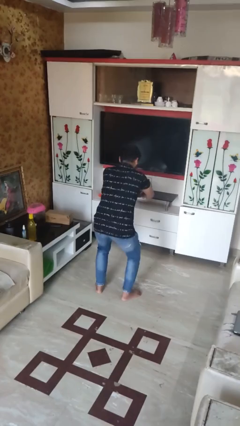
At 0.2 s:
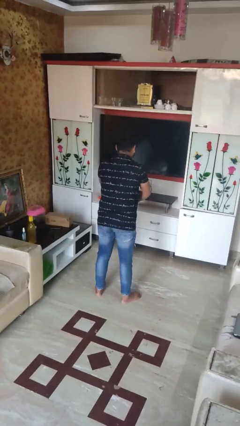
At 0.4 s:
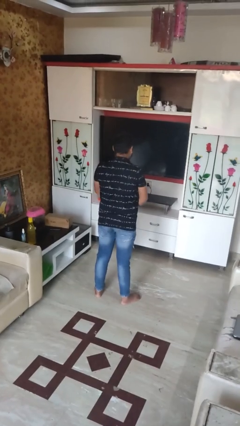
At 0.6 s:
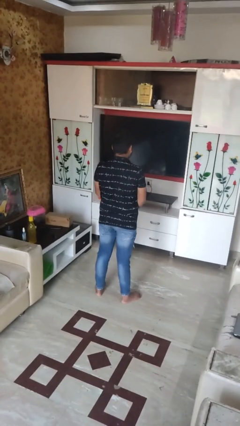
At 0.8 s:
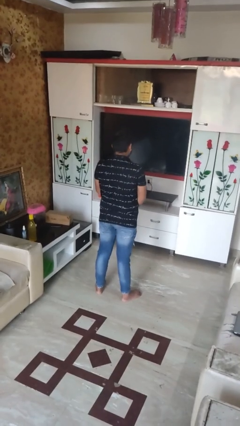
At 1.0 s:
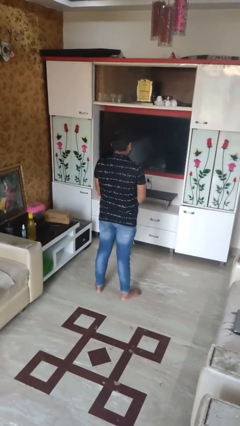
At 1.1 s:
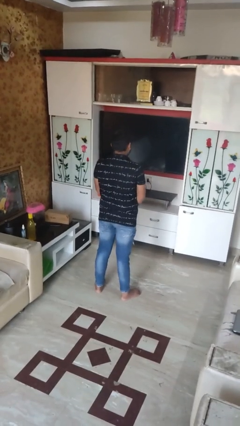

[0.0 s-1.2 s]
person stands up

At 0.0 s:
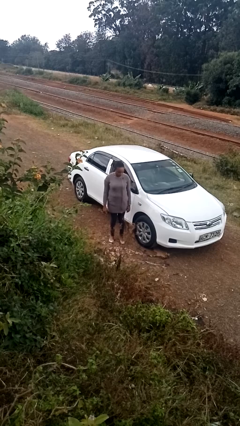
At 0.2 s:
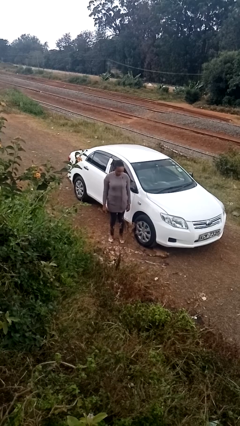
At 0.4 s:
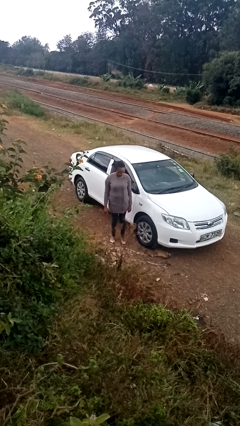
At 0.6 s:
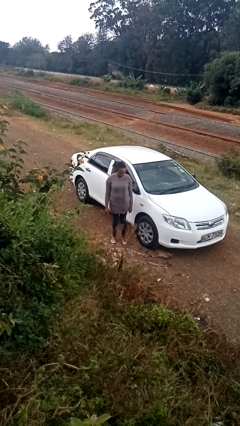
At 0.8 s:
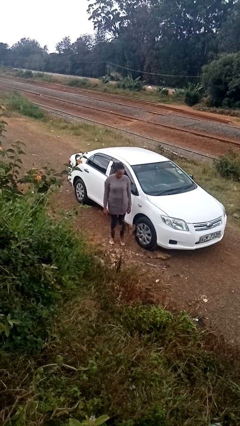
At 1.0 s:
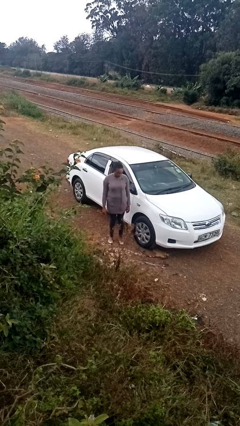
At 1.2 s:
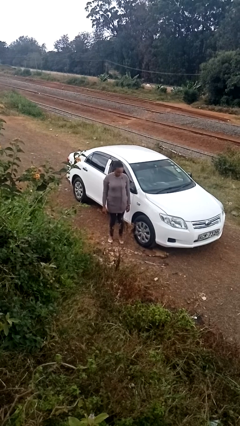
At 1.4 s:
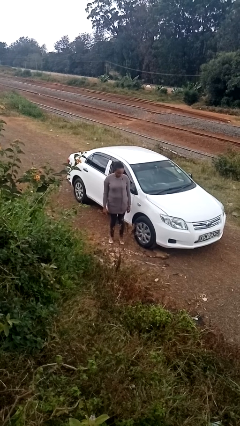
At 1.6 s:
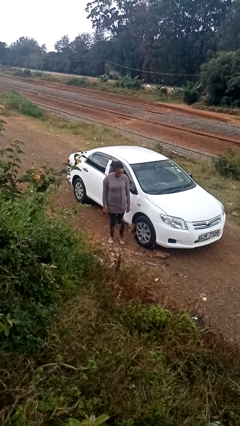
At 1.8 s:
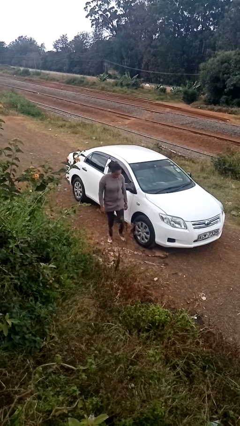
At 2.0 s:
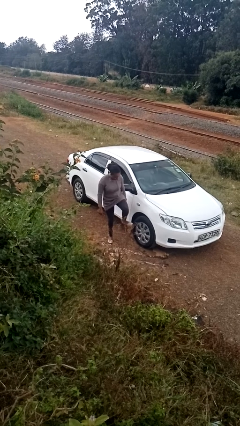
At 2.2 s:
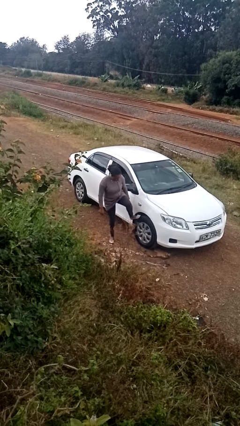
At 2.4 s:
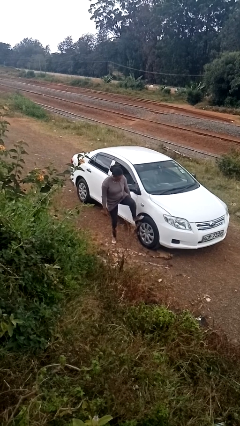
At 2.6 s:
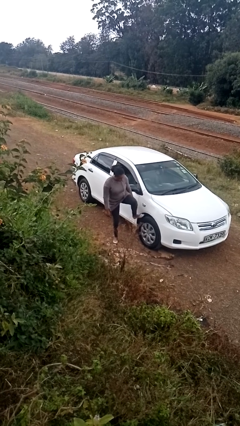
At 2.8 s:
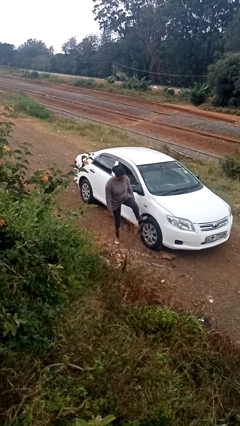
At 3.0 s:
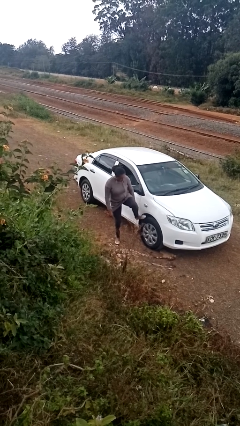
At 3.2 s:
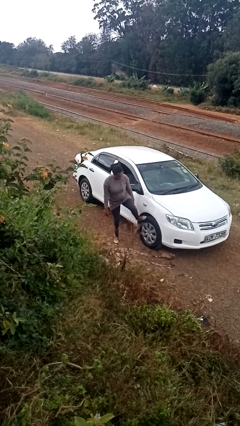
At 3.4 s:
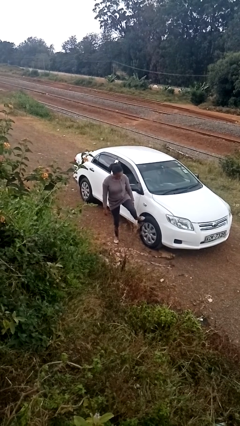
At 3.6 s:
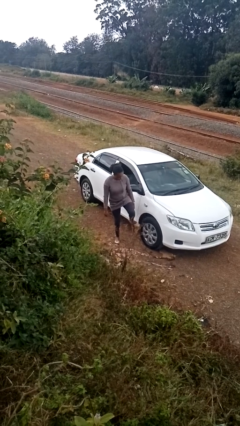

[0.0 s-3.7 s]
person kicks car tires

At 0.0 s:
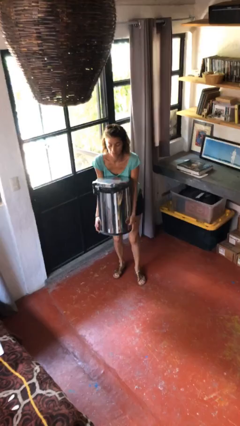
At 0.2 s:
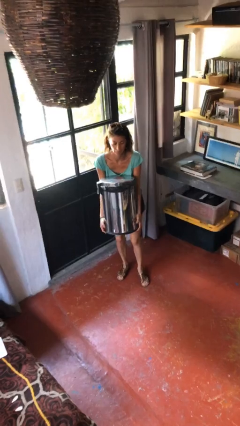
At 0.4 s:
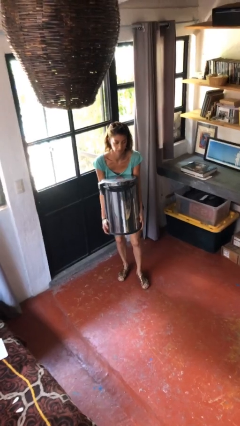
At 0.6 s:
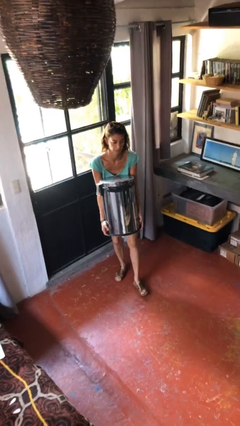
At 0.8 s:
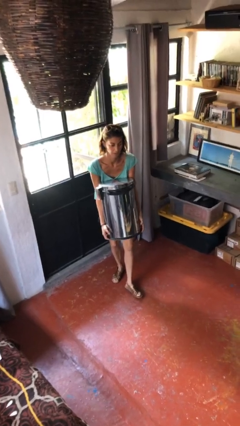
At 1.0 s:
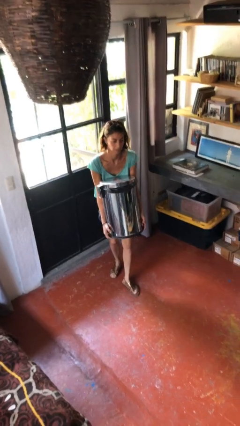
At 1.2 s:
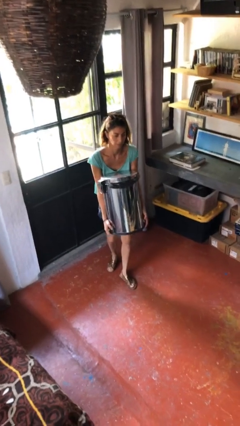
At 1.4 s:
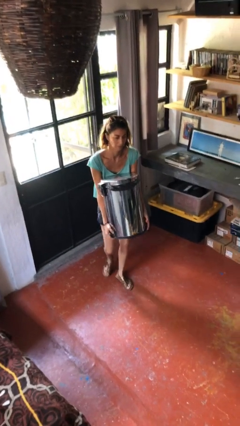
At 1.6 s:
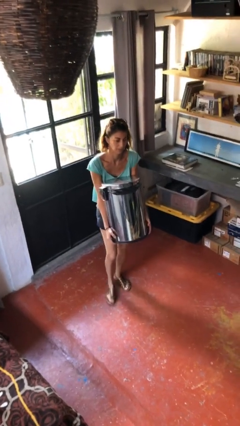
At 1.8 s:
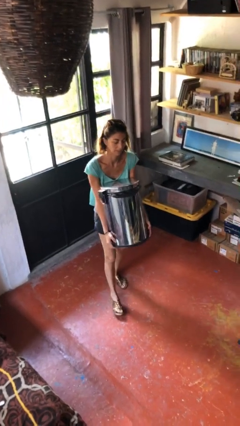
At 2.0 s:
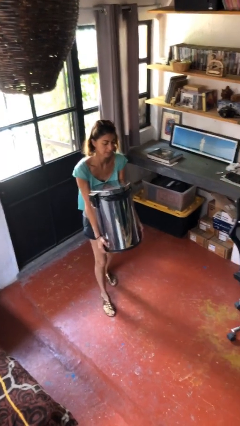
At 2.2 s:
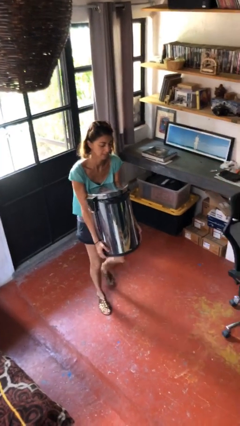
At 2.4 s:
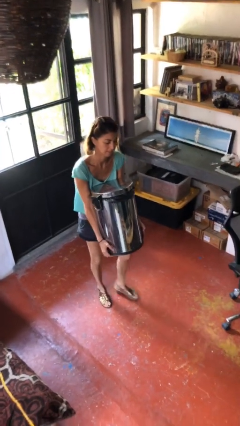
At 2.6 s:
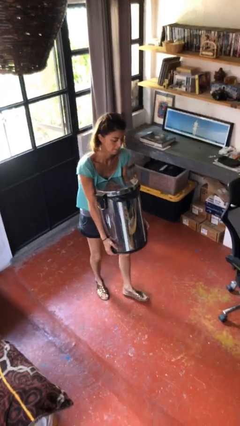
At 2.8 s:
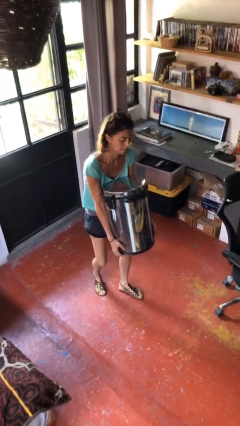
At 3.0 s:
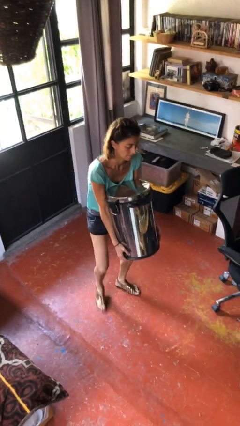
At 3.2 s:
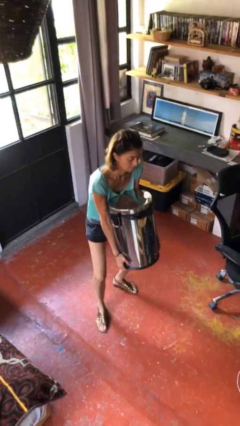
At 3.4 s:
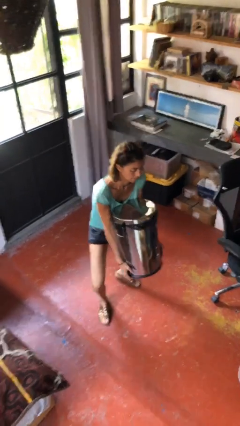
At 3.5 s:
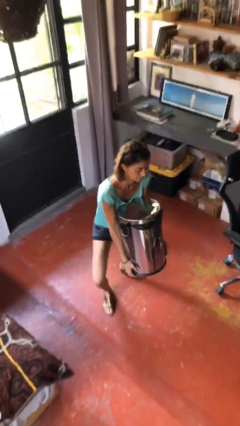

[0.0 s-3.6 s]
person carries heavy object

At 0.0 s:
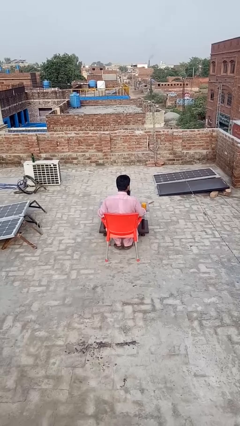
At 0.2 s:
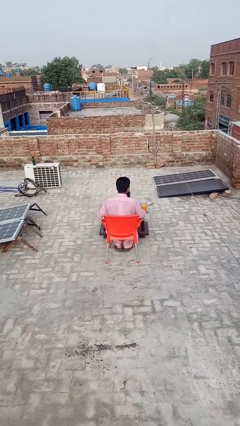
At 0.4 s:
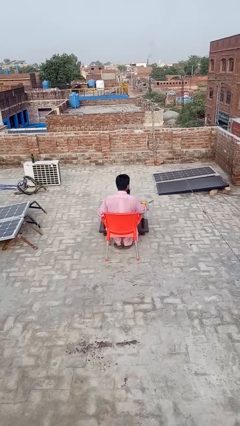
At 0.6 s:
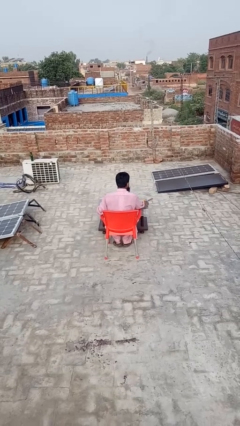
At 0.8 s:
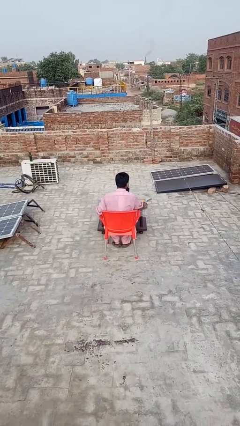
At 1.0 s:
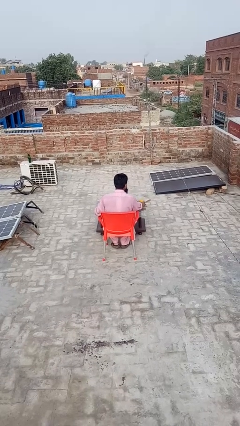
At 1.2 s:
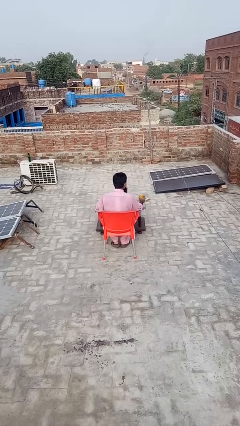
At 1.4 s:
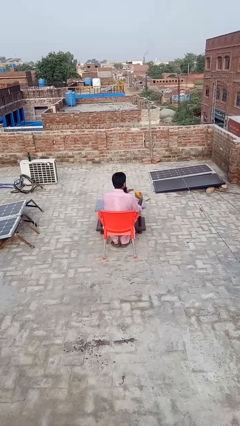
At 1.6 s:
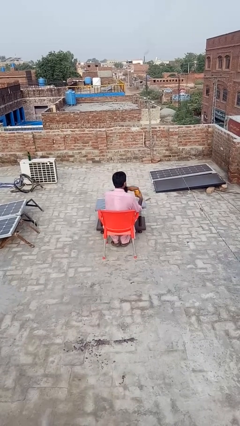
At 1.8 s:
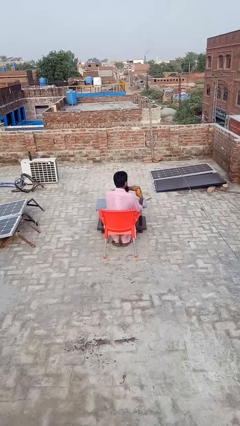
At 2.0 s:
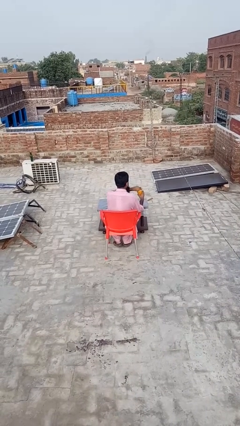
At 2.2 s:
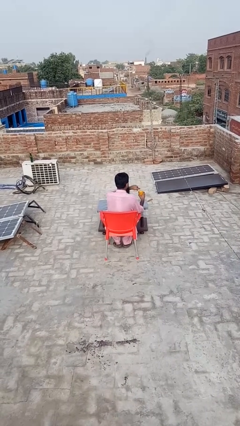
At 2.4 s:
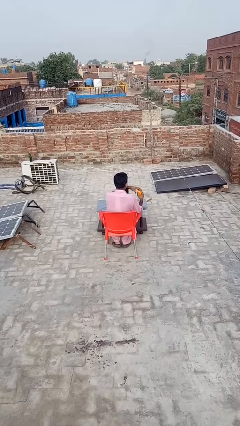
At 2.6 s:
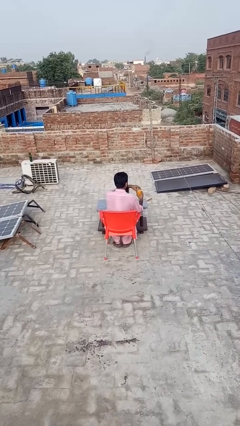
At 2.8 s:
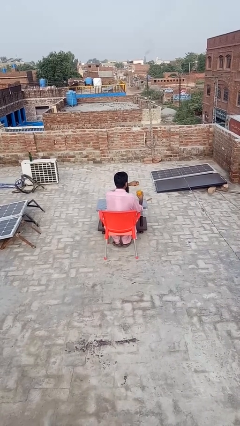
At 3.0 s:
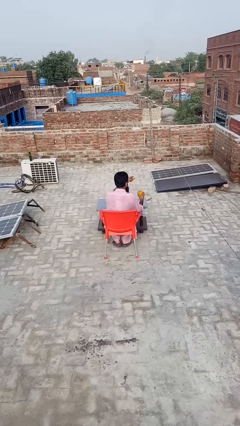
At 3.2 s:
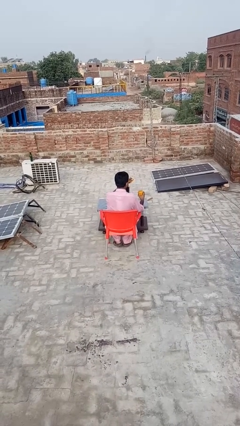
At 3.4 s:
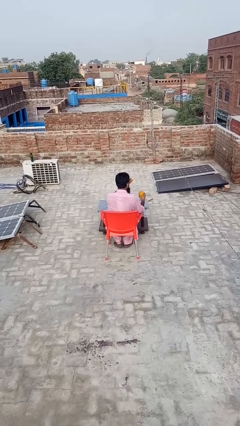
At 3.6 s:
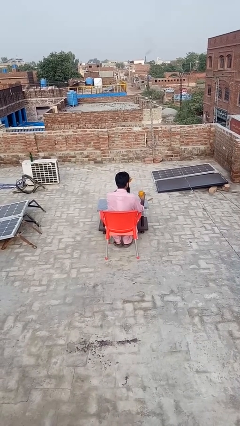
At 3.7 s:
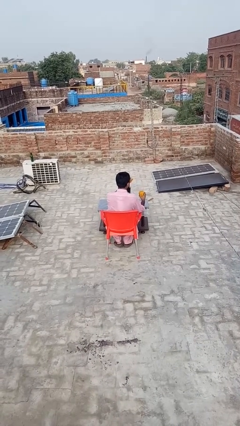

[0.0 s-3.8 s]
person opens jar

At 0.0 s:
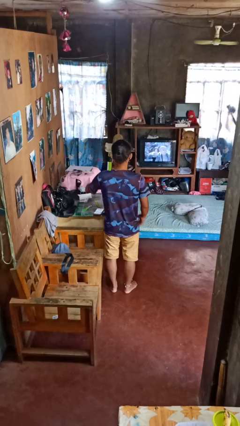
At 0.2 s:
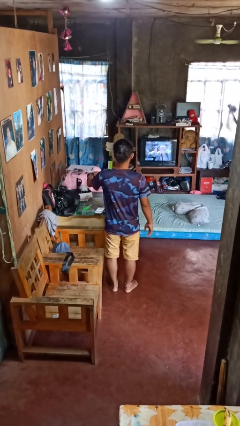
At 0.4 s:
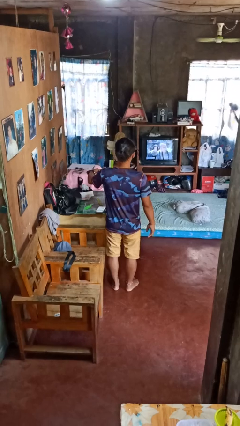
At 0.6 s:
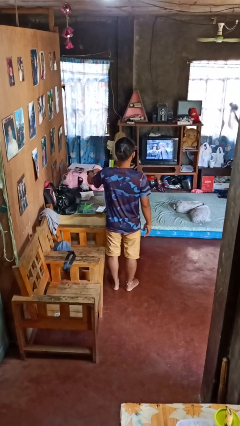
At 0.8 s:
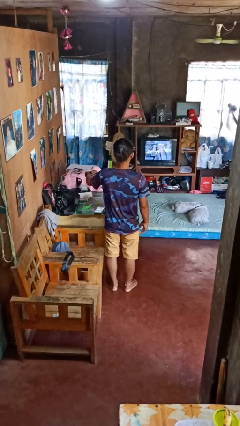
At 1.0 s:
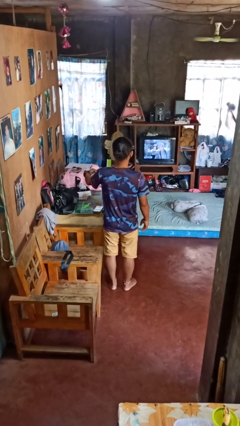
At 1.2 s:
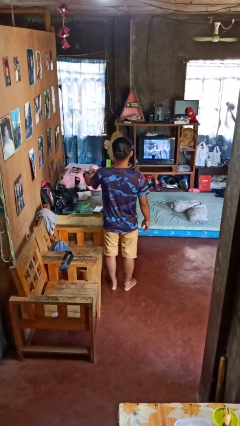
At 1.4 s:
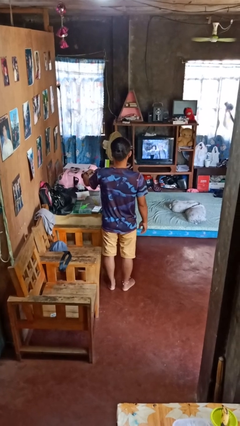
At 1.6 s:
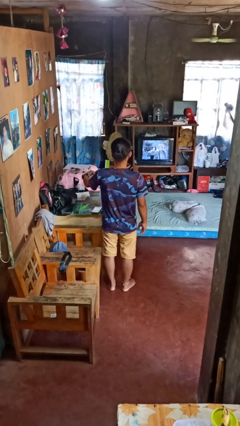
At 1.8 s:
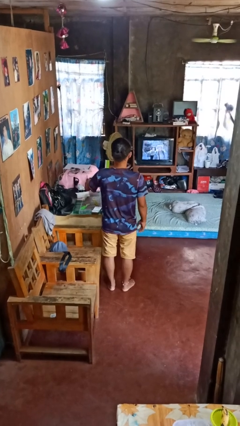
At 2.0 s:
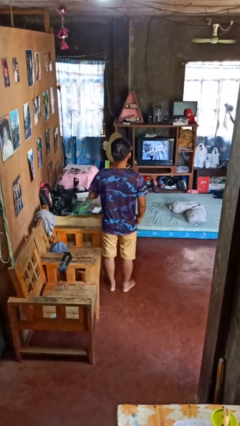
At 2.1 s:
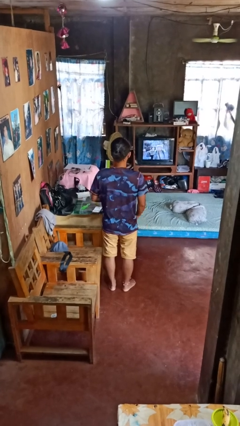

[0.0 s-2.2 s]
person uses television remote

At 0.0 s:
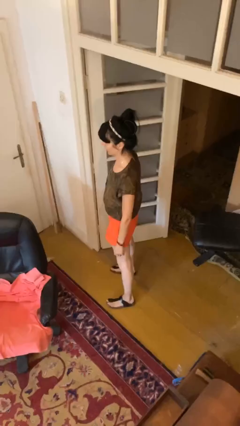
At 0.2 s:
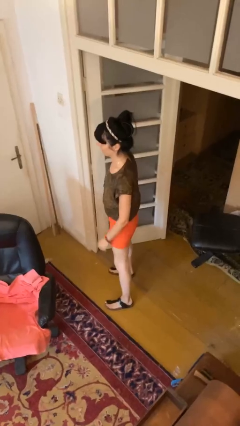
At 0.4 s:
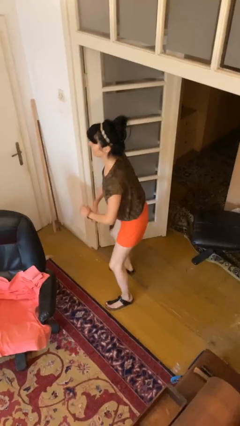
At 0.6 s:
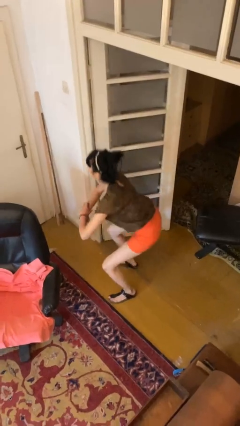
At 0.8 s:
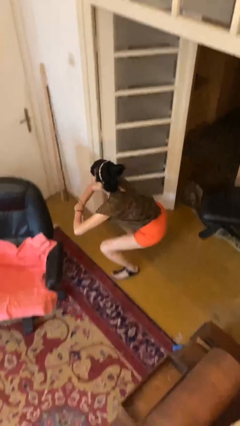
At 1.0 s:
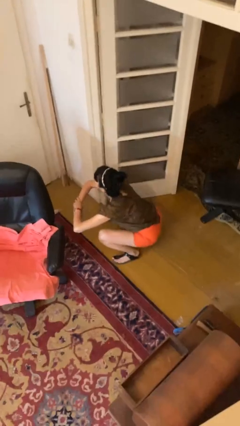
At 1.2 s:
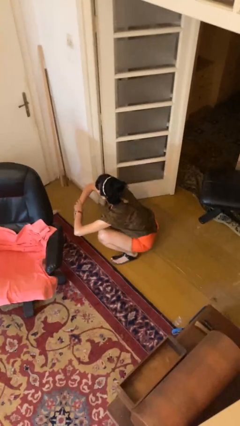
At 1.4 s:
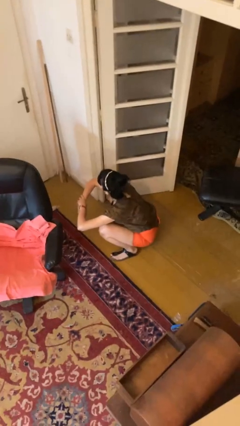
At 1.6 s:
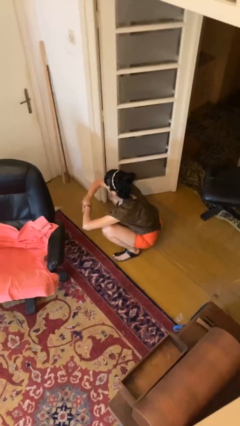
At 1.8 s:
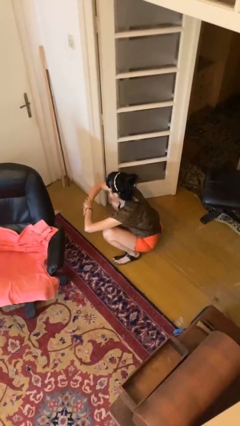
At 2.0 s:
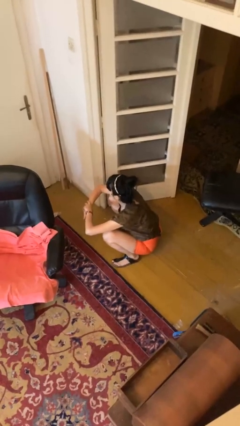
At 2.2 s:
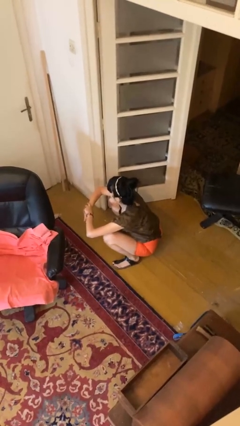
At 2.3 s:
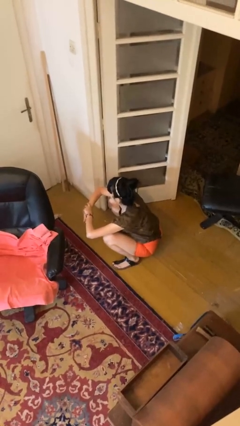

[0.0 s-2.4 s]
person squats

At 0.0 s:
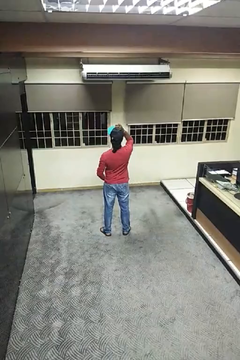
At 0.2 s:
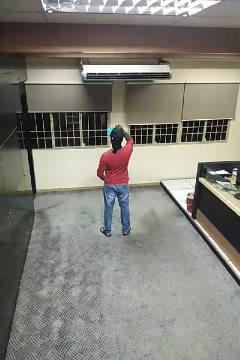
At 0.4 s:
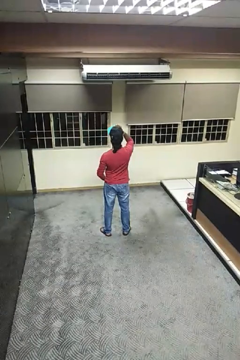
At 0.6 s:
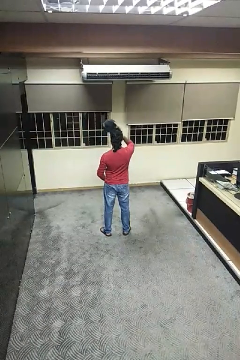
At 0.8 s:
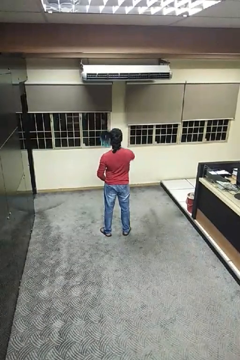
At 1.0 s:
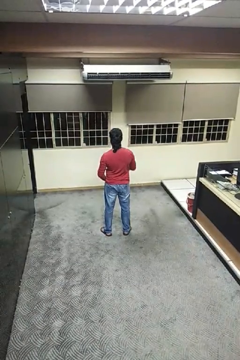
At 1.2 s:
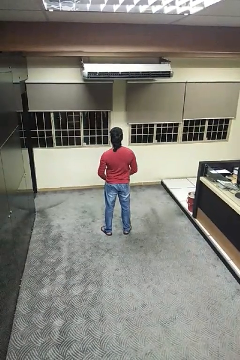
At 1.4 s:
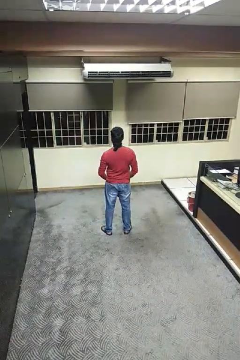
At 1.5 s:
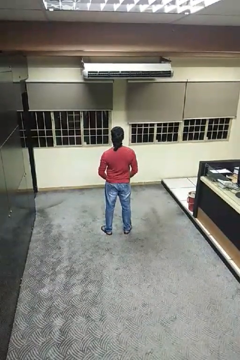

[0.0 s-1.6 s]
person takes off hat
